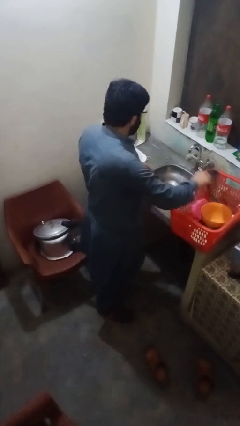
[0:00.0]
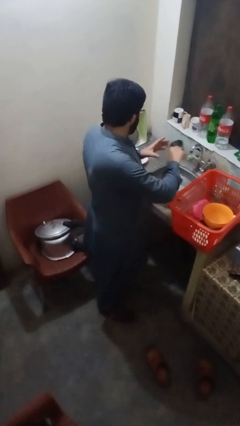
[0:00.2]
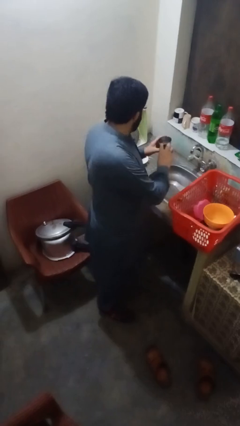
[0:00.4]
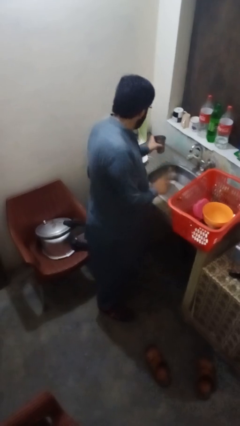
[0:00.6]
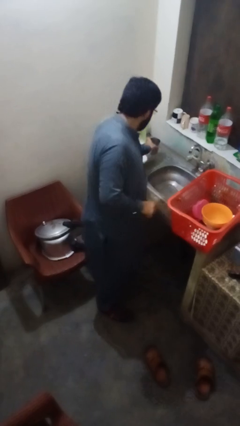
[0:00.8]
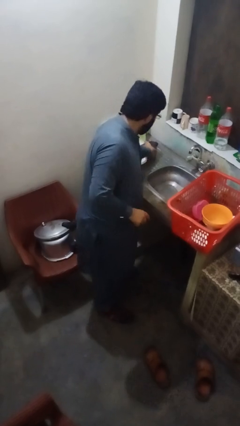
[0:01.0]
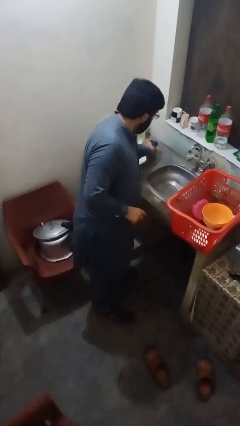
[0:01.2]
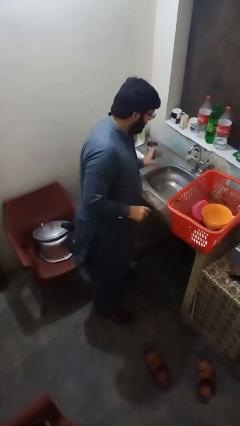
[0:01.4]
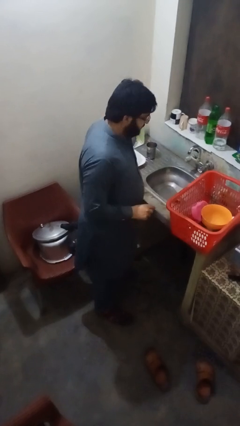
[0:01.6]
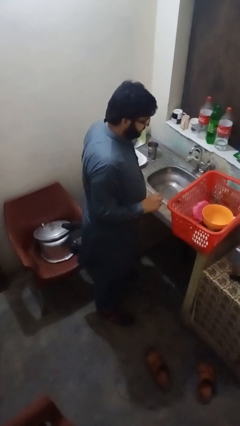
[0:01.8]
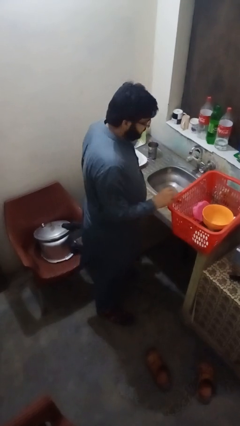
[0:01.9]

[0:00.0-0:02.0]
person unloads dishwasher

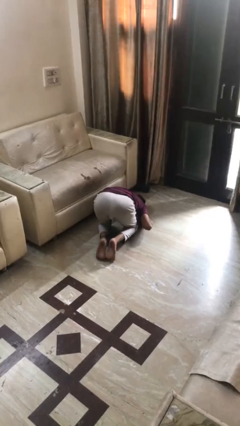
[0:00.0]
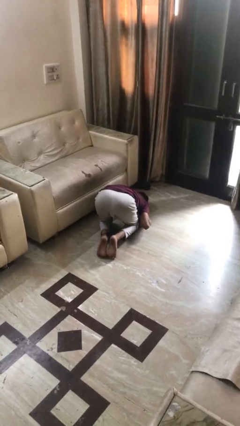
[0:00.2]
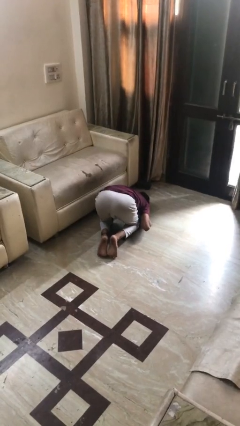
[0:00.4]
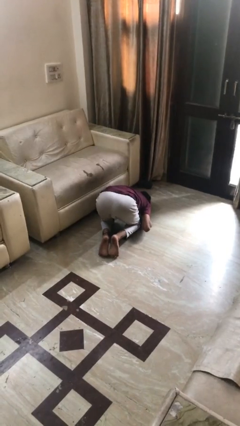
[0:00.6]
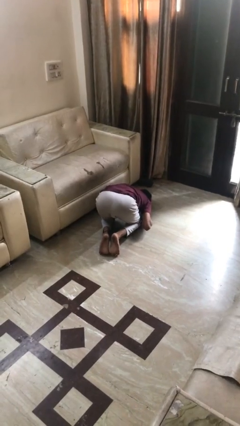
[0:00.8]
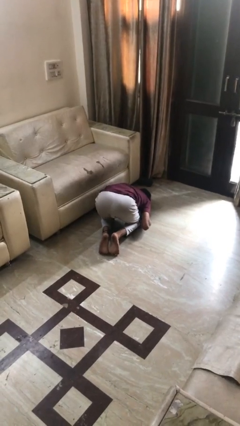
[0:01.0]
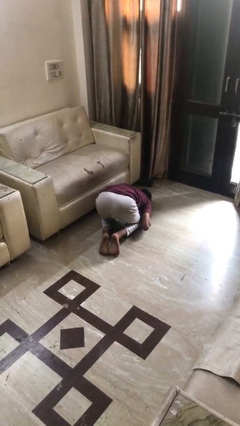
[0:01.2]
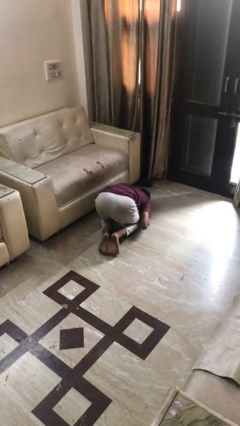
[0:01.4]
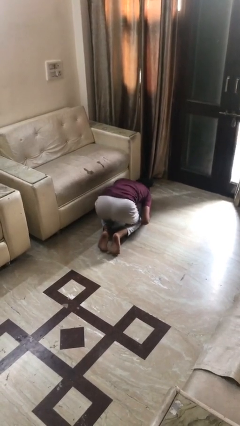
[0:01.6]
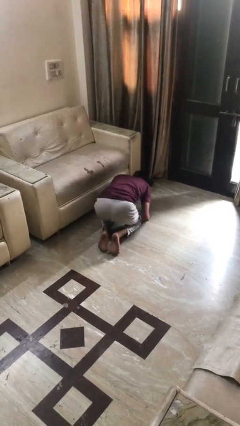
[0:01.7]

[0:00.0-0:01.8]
person searches under couch

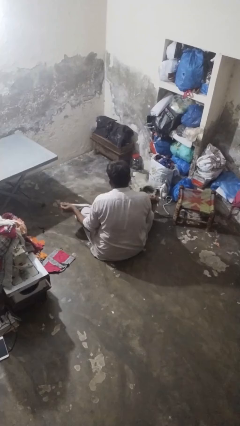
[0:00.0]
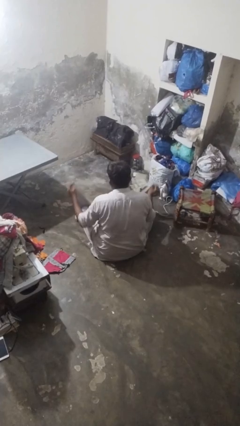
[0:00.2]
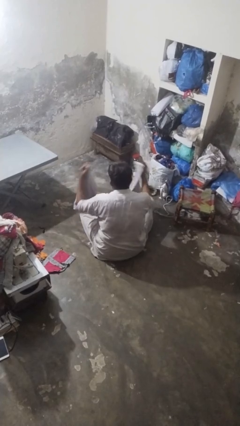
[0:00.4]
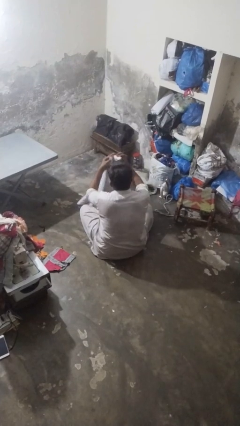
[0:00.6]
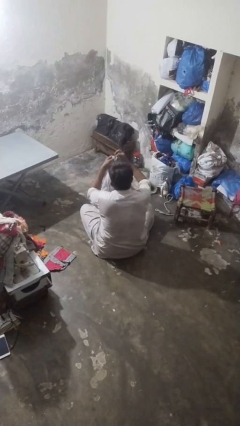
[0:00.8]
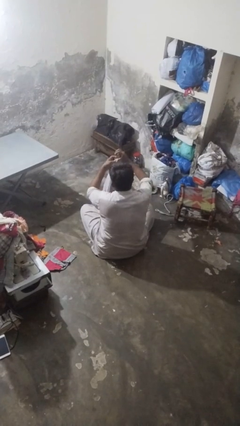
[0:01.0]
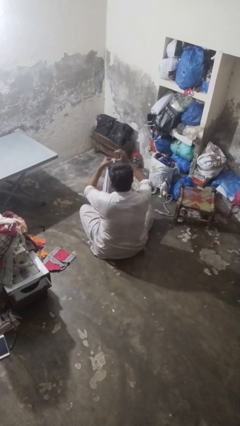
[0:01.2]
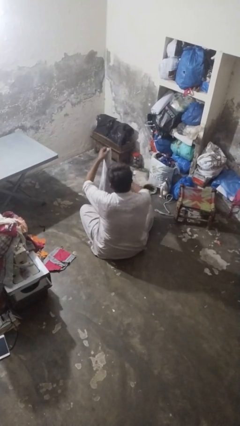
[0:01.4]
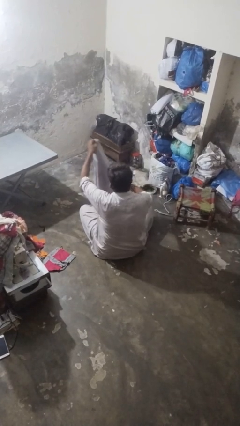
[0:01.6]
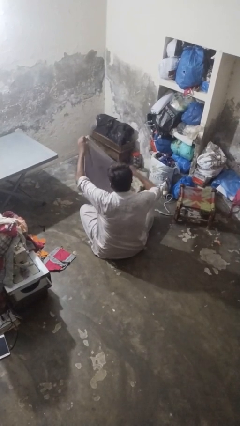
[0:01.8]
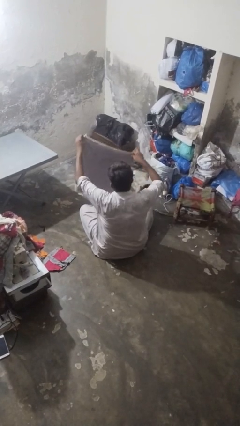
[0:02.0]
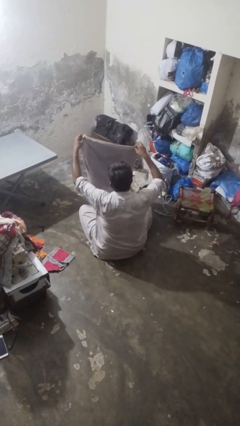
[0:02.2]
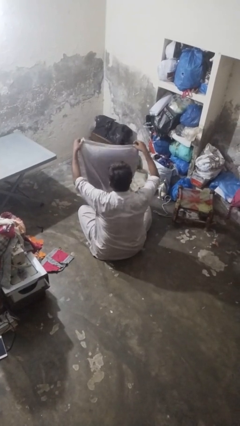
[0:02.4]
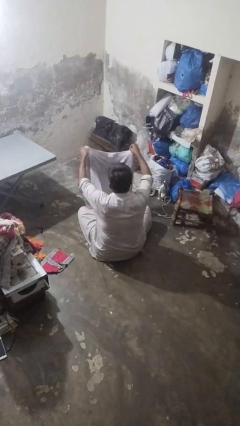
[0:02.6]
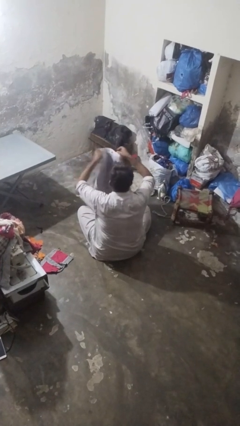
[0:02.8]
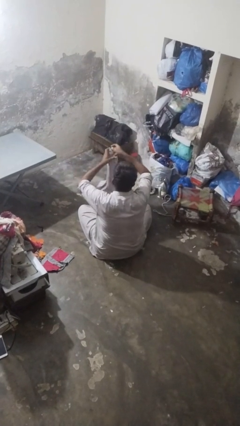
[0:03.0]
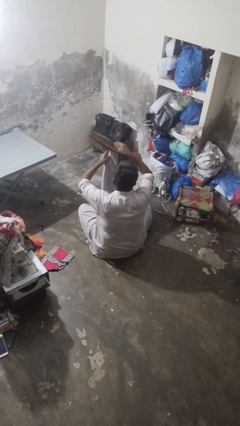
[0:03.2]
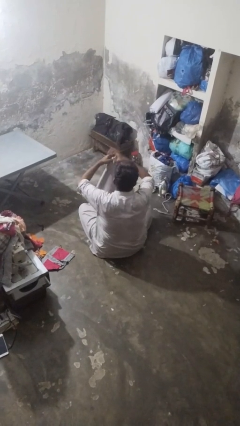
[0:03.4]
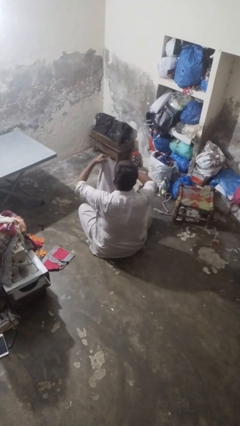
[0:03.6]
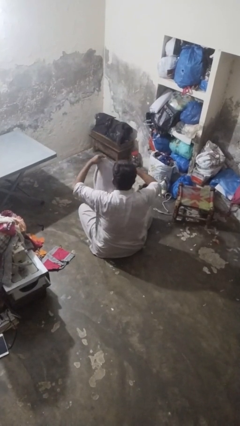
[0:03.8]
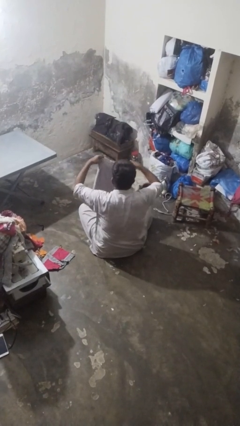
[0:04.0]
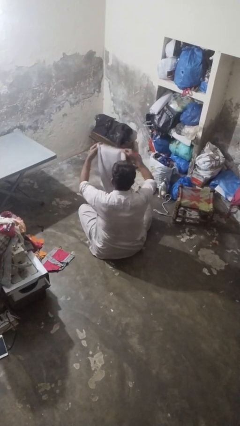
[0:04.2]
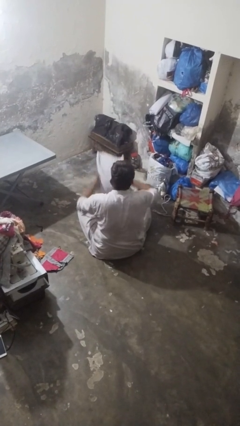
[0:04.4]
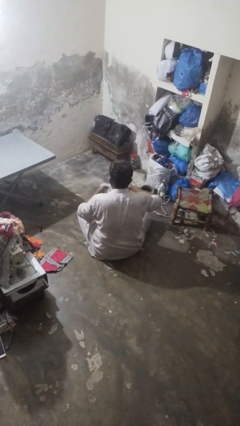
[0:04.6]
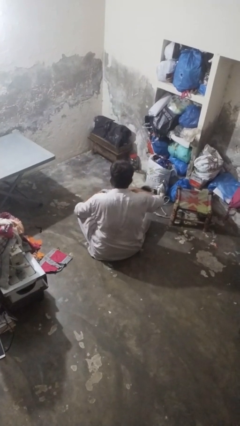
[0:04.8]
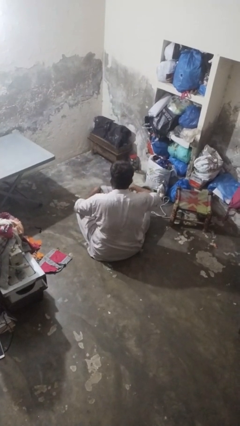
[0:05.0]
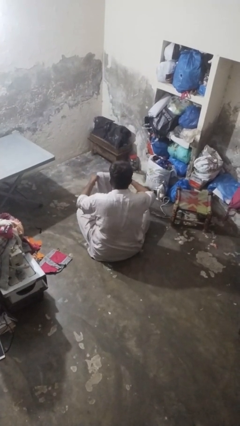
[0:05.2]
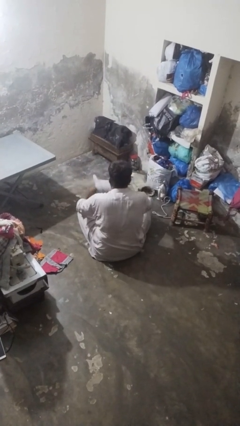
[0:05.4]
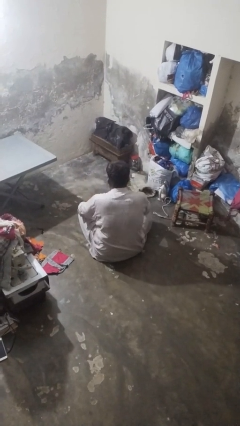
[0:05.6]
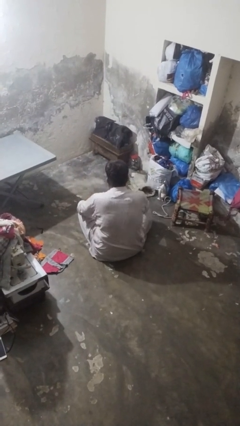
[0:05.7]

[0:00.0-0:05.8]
person folds towel

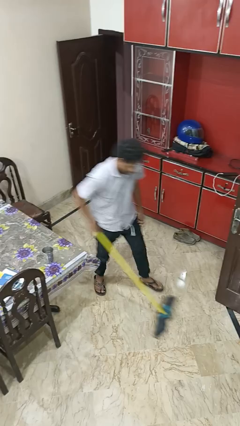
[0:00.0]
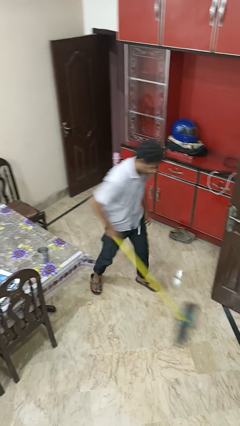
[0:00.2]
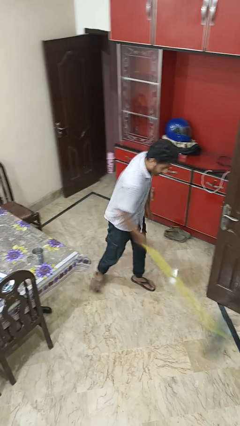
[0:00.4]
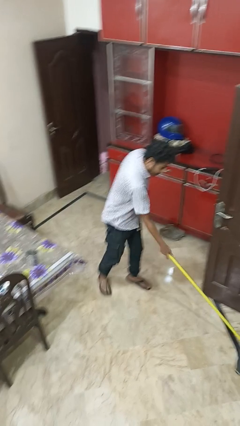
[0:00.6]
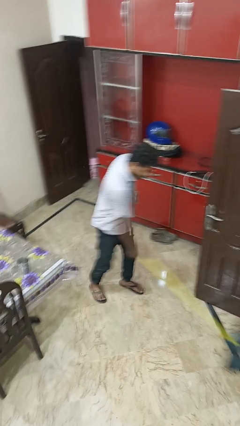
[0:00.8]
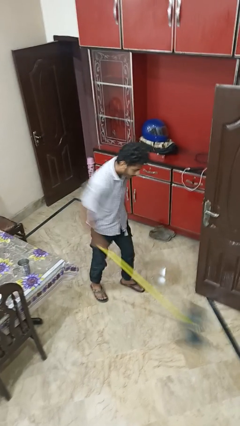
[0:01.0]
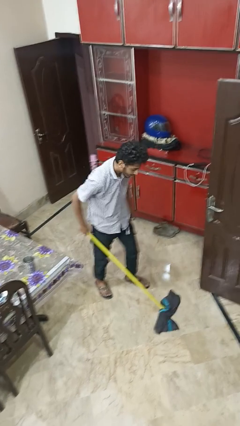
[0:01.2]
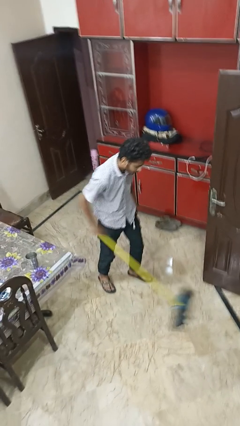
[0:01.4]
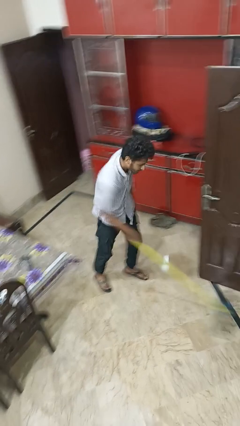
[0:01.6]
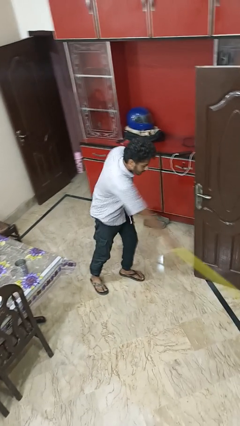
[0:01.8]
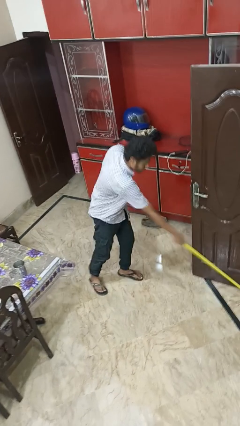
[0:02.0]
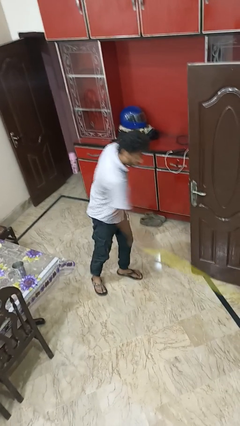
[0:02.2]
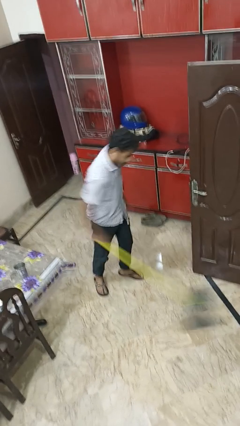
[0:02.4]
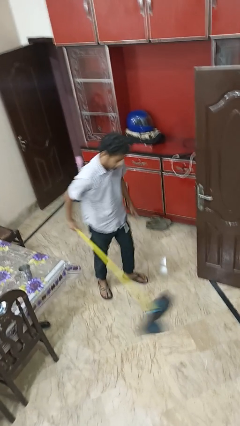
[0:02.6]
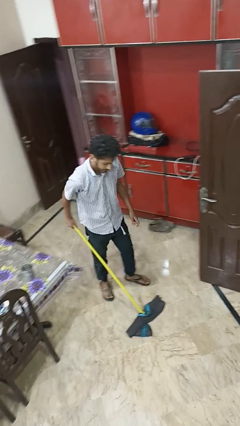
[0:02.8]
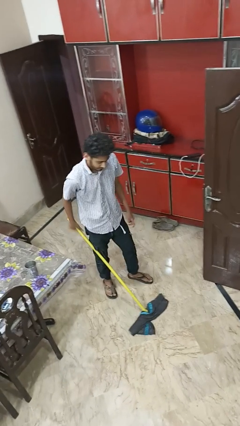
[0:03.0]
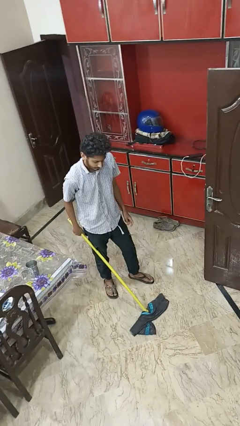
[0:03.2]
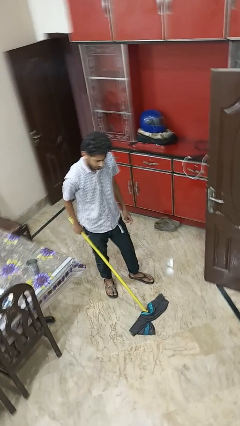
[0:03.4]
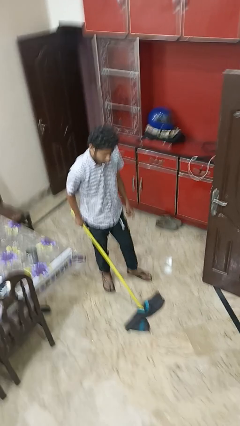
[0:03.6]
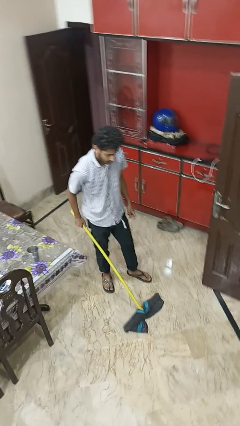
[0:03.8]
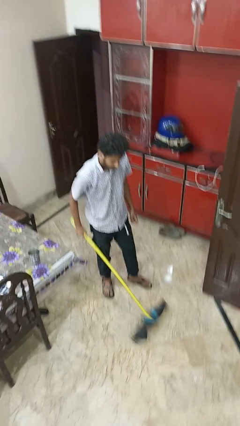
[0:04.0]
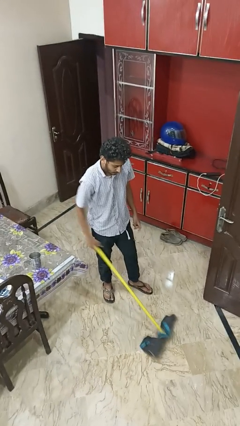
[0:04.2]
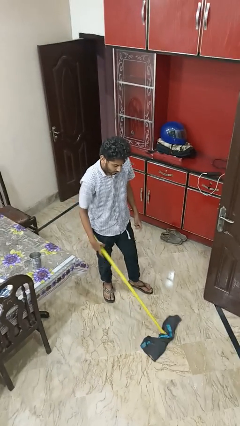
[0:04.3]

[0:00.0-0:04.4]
person mops

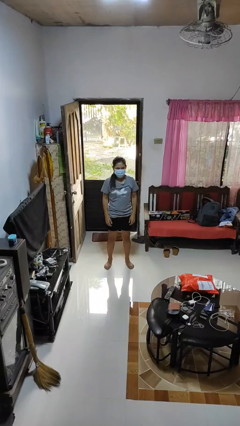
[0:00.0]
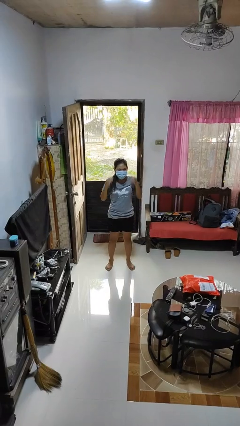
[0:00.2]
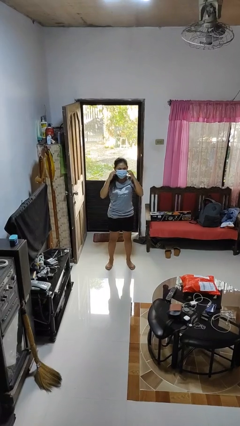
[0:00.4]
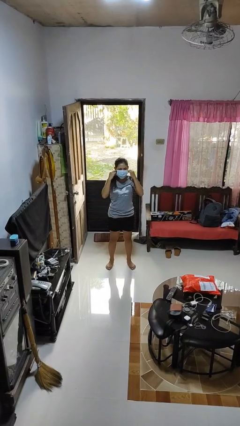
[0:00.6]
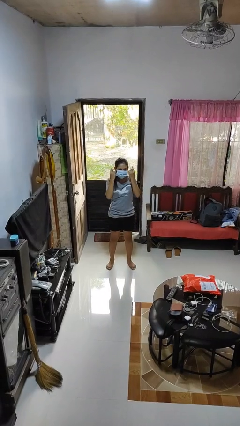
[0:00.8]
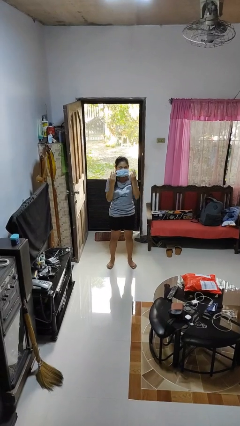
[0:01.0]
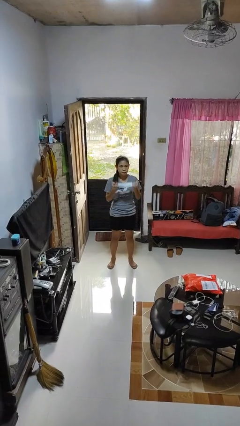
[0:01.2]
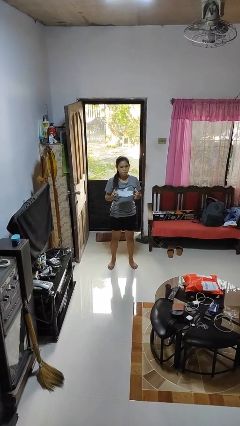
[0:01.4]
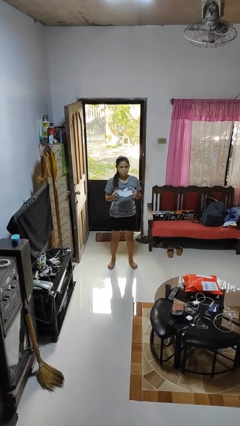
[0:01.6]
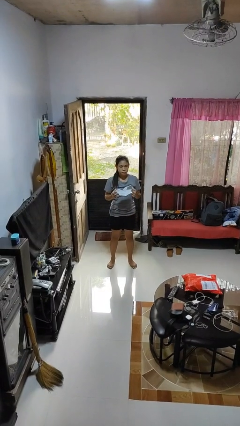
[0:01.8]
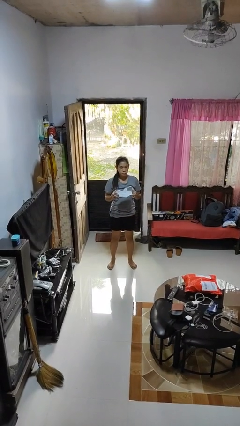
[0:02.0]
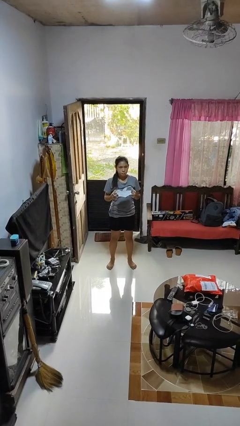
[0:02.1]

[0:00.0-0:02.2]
person takes off facemask

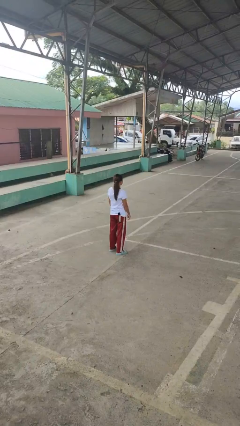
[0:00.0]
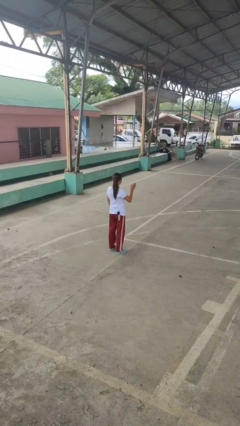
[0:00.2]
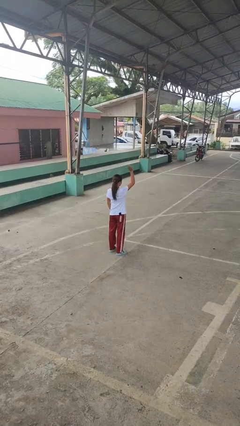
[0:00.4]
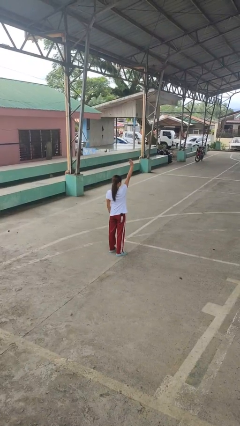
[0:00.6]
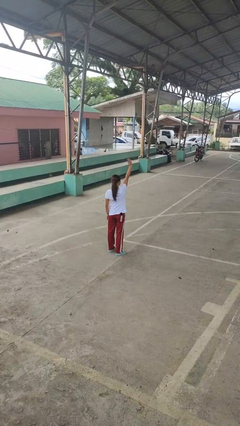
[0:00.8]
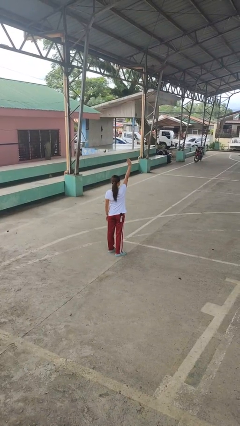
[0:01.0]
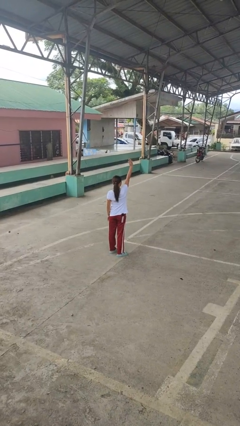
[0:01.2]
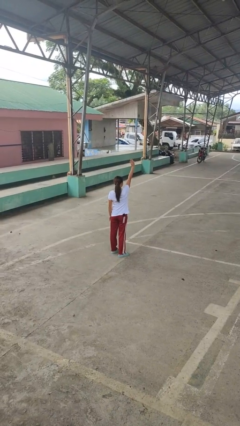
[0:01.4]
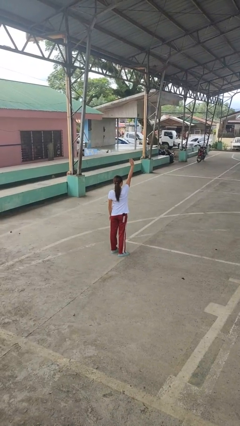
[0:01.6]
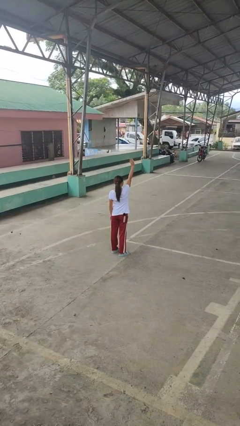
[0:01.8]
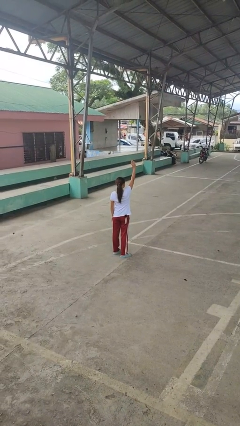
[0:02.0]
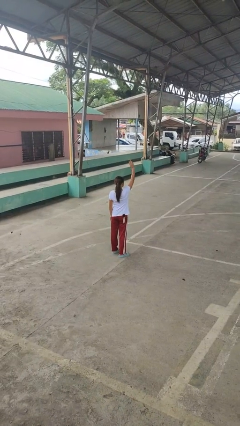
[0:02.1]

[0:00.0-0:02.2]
person gestures raise hand
